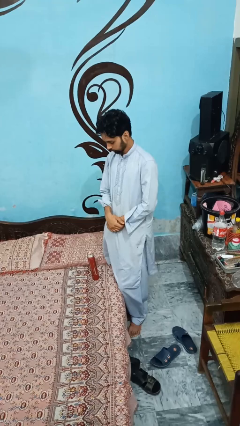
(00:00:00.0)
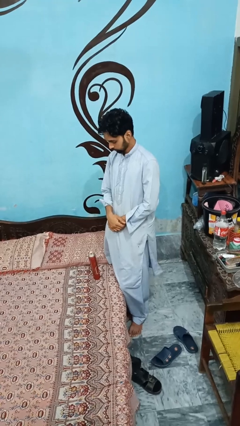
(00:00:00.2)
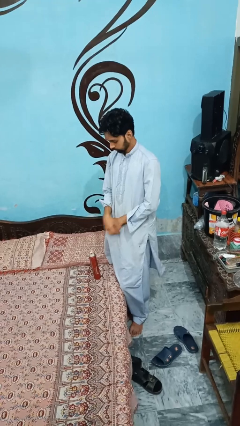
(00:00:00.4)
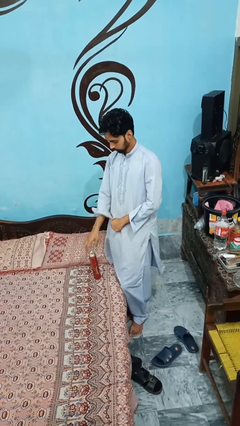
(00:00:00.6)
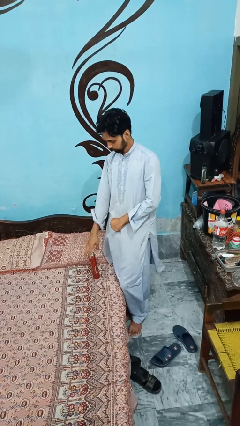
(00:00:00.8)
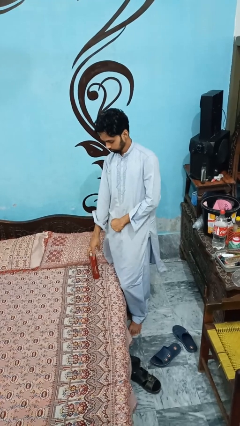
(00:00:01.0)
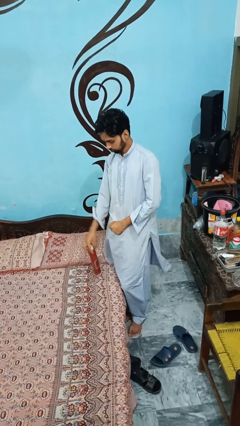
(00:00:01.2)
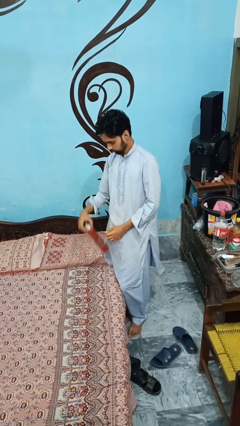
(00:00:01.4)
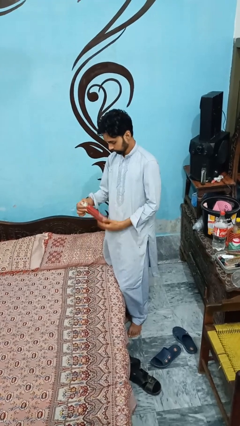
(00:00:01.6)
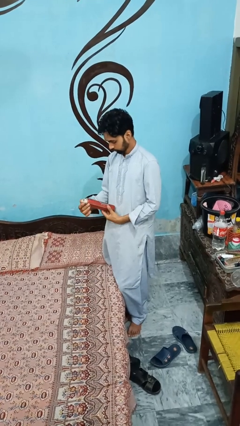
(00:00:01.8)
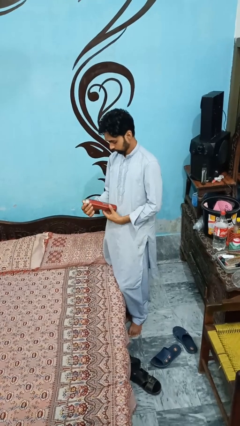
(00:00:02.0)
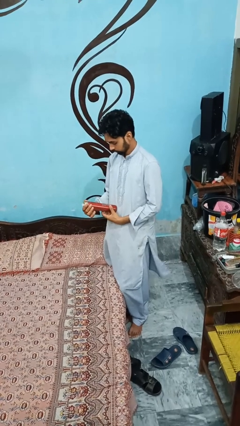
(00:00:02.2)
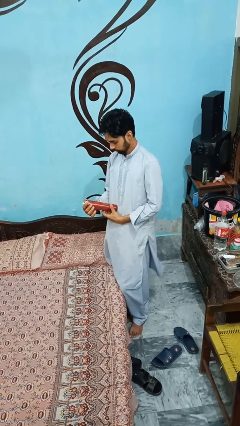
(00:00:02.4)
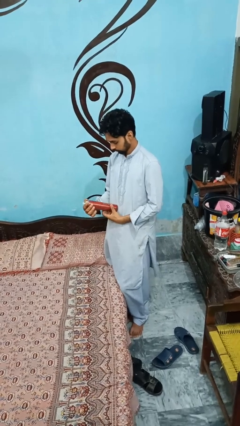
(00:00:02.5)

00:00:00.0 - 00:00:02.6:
person picks up object from bed

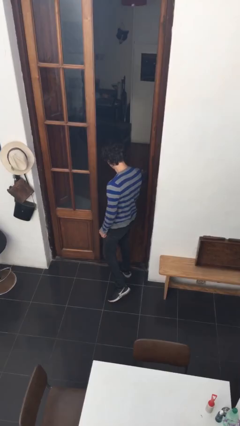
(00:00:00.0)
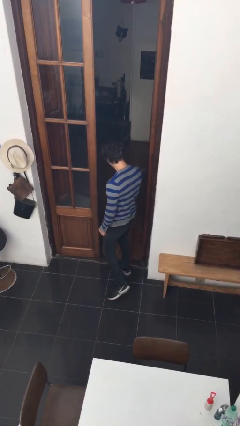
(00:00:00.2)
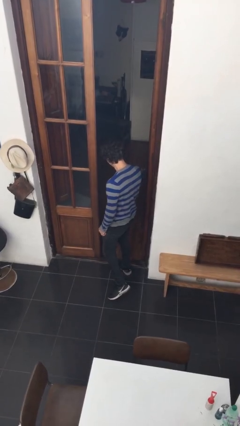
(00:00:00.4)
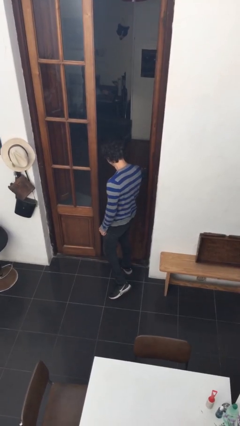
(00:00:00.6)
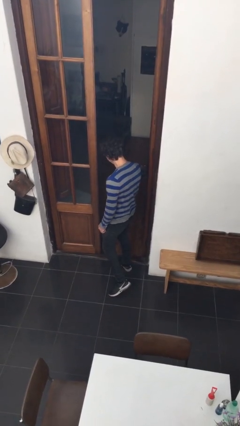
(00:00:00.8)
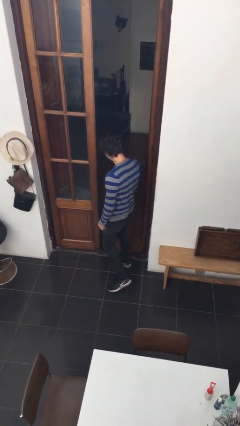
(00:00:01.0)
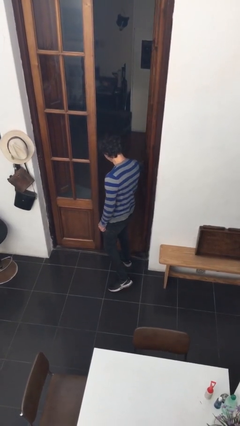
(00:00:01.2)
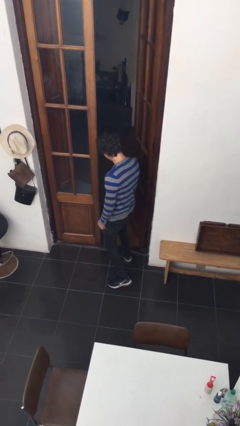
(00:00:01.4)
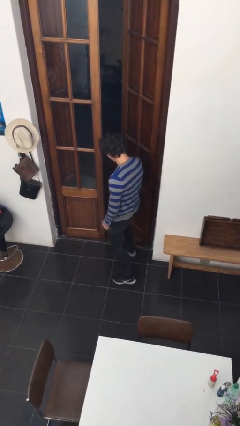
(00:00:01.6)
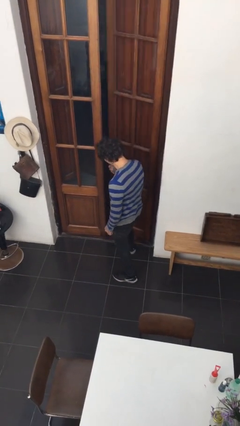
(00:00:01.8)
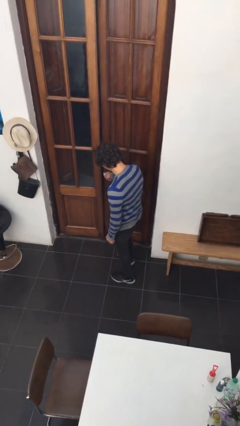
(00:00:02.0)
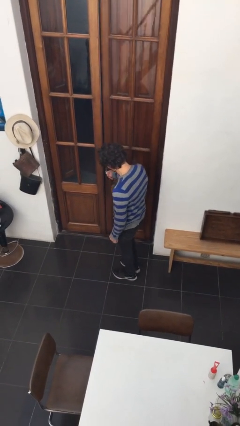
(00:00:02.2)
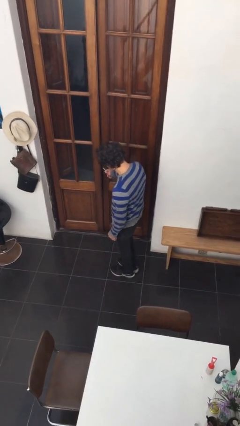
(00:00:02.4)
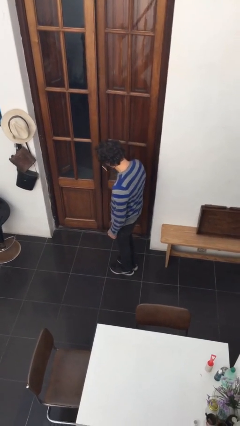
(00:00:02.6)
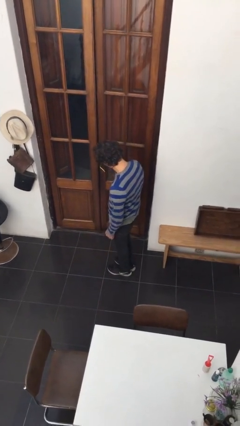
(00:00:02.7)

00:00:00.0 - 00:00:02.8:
person closes facility door

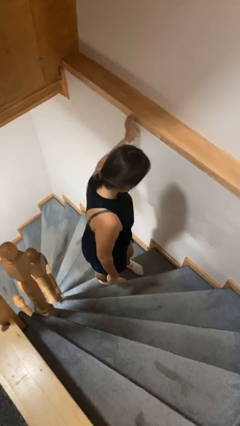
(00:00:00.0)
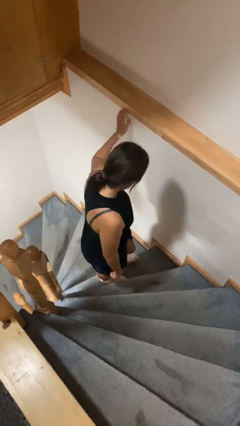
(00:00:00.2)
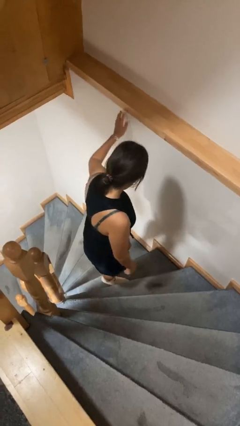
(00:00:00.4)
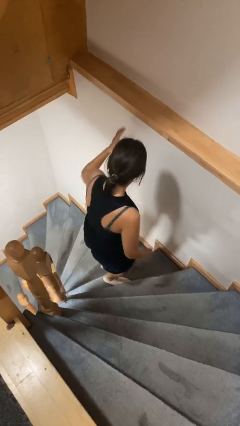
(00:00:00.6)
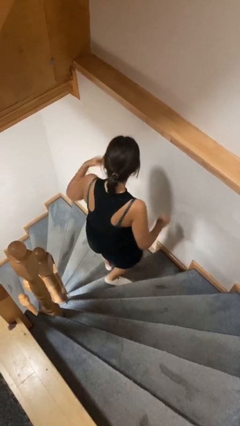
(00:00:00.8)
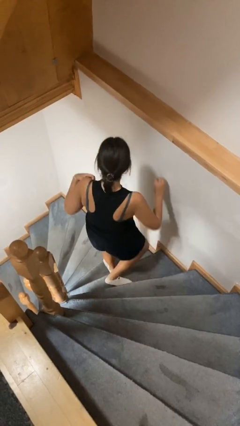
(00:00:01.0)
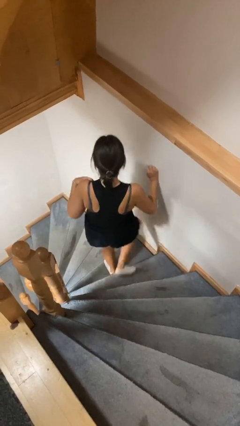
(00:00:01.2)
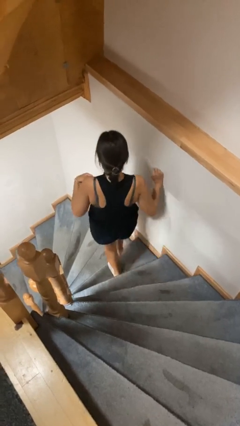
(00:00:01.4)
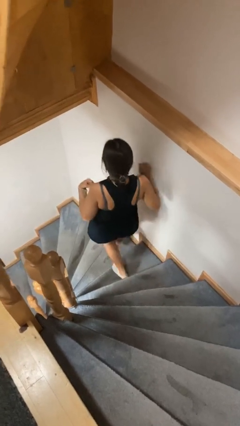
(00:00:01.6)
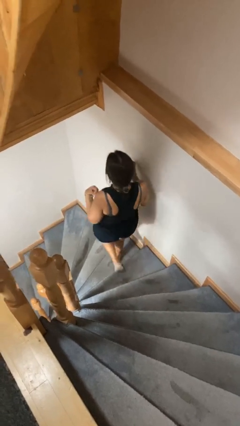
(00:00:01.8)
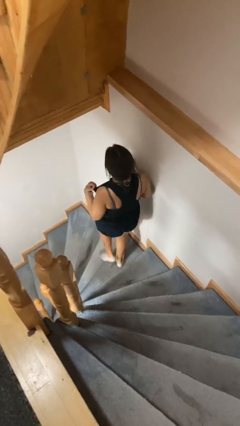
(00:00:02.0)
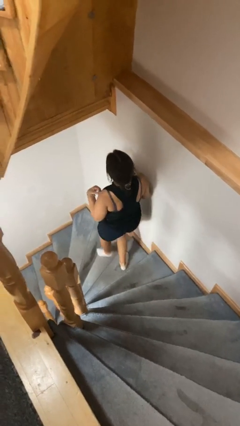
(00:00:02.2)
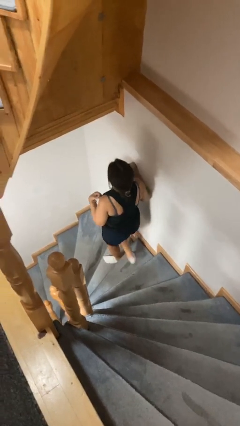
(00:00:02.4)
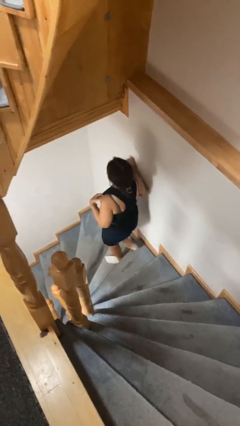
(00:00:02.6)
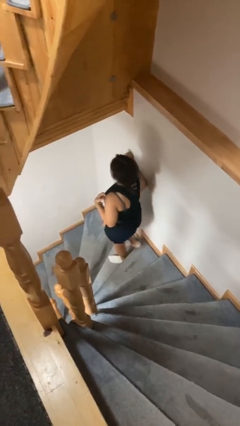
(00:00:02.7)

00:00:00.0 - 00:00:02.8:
person climbs down stairs

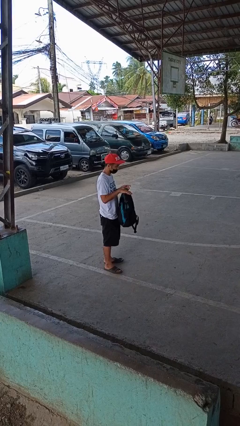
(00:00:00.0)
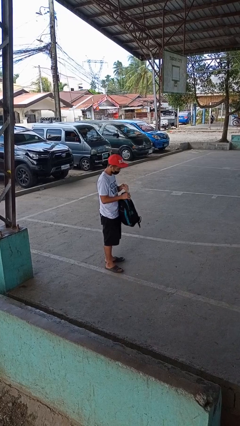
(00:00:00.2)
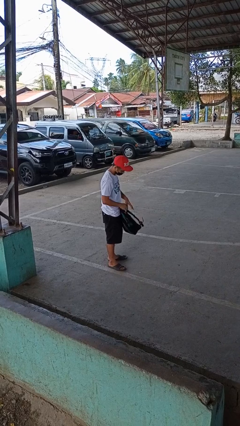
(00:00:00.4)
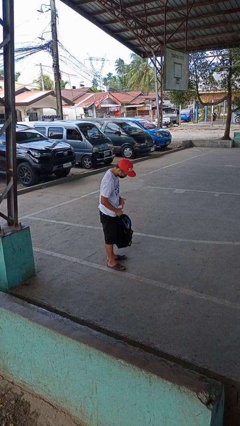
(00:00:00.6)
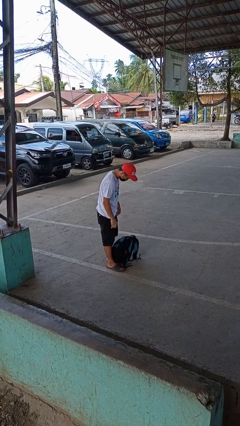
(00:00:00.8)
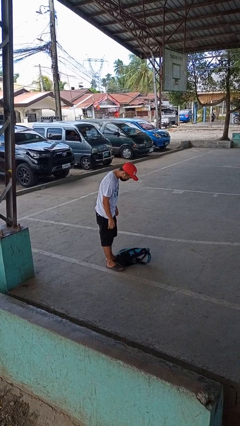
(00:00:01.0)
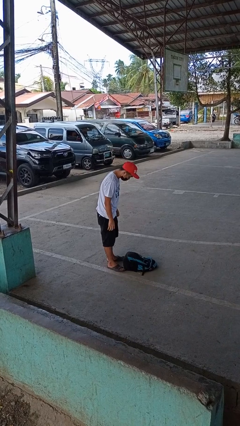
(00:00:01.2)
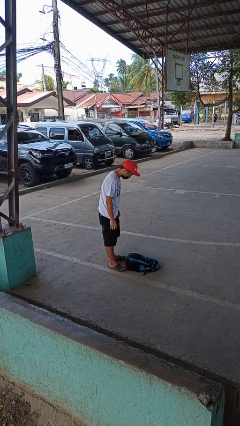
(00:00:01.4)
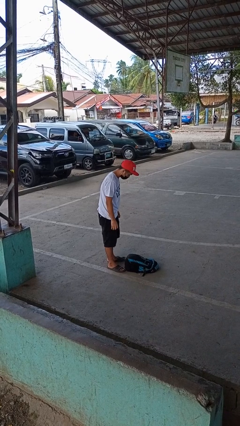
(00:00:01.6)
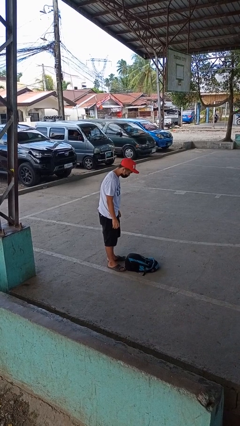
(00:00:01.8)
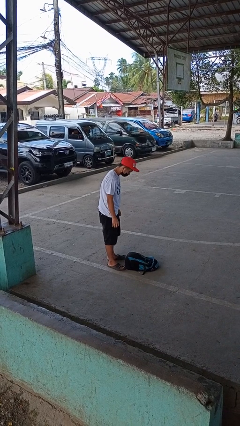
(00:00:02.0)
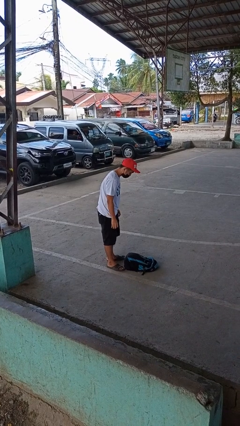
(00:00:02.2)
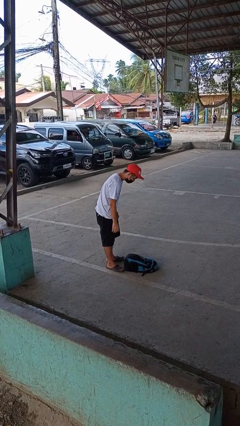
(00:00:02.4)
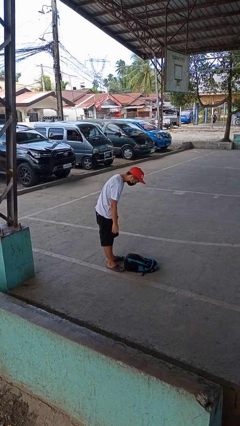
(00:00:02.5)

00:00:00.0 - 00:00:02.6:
person drops object

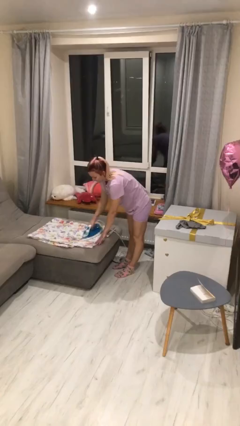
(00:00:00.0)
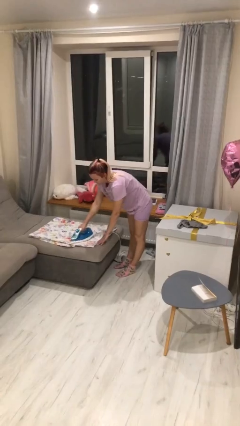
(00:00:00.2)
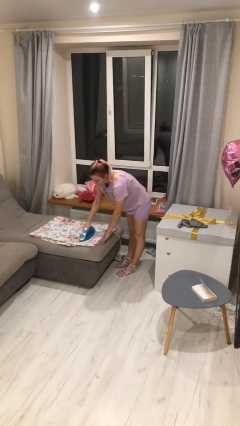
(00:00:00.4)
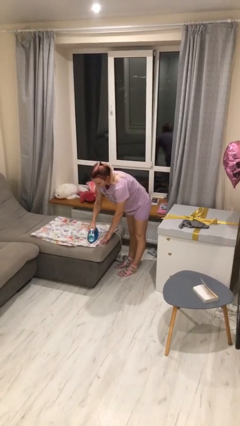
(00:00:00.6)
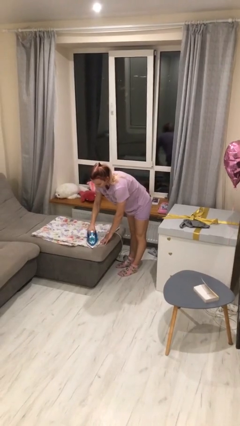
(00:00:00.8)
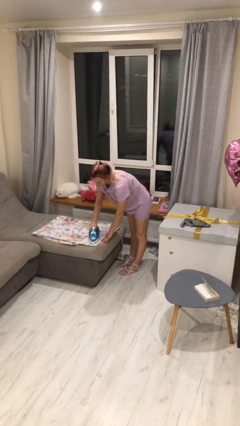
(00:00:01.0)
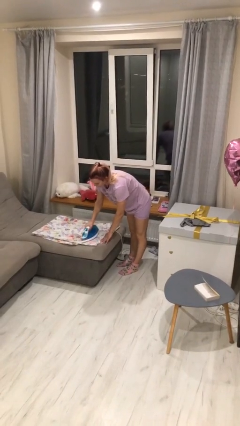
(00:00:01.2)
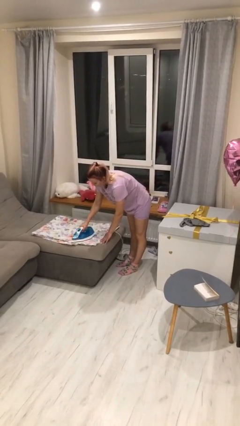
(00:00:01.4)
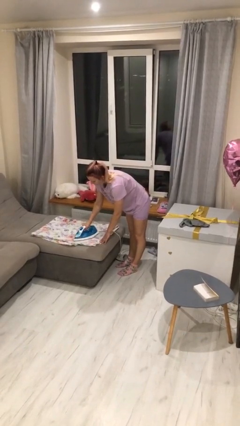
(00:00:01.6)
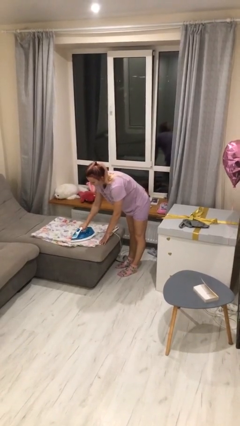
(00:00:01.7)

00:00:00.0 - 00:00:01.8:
person irons clothes

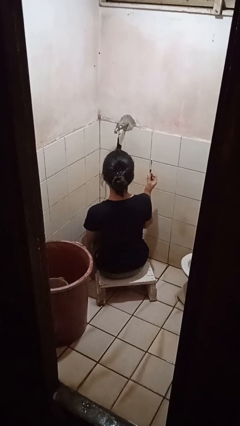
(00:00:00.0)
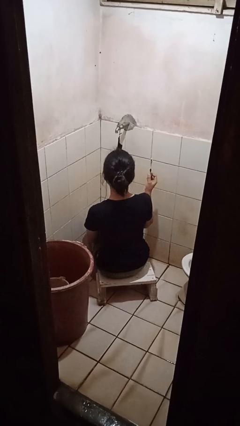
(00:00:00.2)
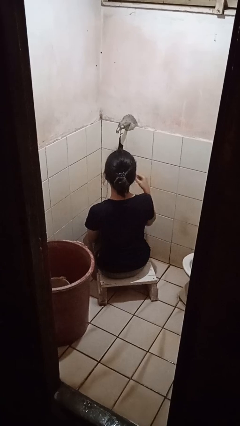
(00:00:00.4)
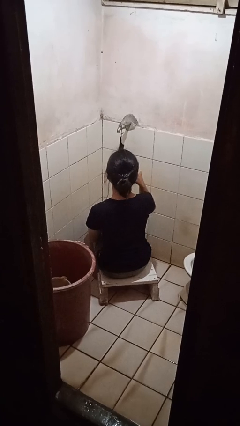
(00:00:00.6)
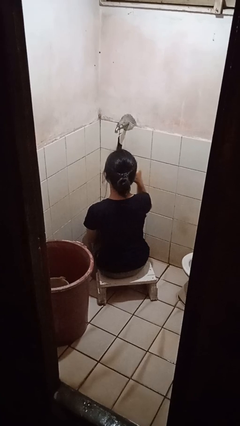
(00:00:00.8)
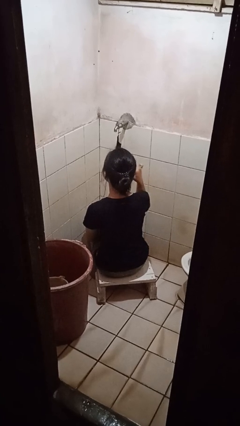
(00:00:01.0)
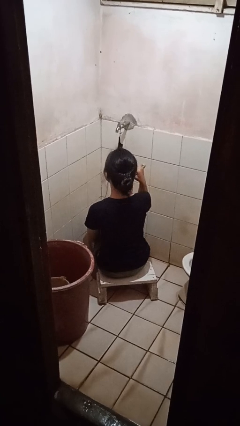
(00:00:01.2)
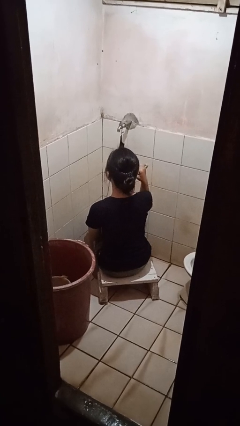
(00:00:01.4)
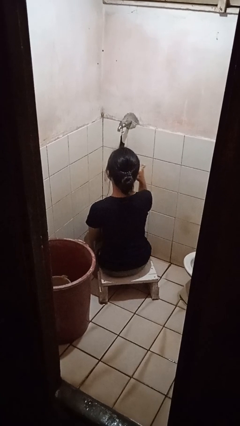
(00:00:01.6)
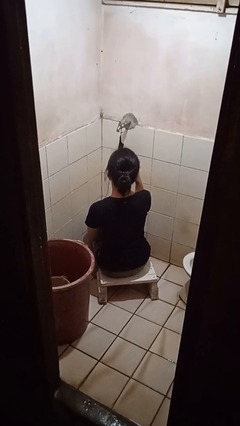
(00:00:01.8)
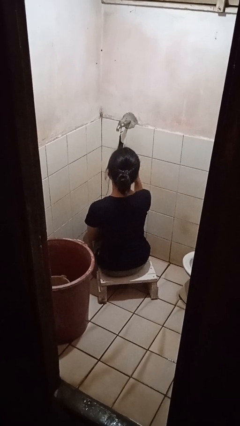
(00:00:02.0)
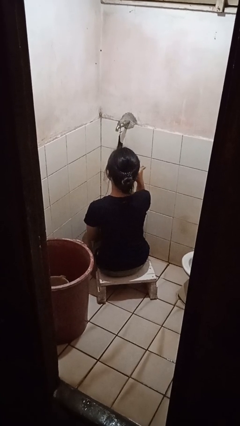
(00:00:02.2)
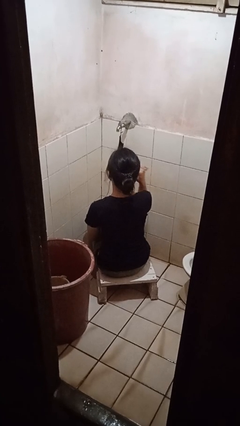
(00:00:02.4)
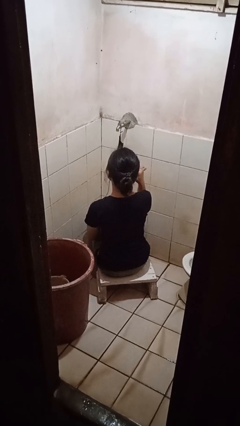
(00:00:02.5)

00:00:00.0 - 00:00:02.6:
person brushes teeth

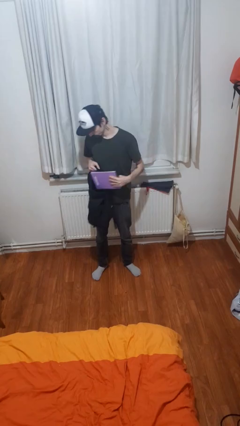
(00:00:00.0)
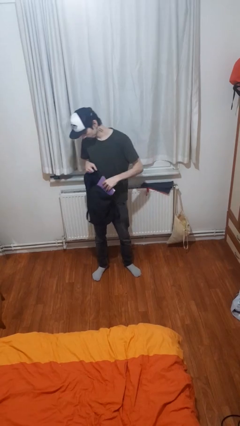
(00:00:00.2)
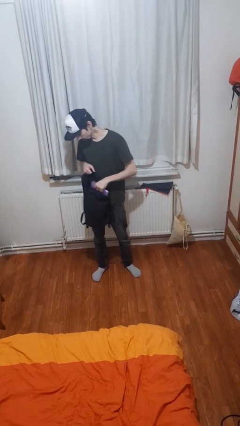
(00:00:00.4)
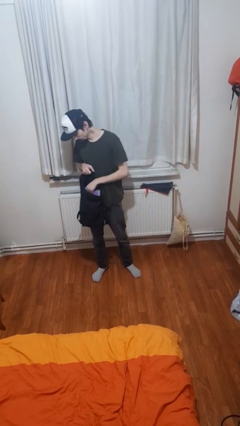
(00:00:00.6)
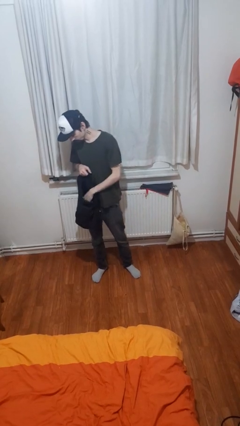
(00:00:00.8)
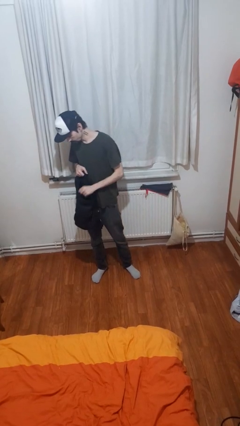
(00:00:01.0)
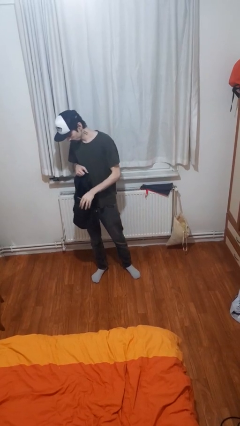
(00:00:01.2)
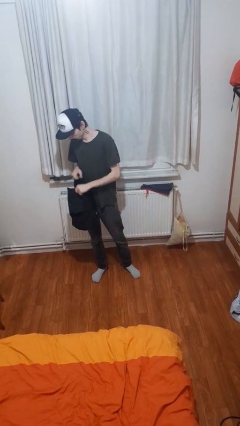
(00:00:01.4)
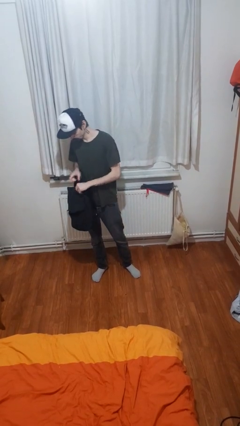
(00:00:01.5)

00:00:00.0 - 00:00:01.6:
person puts object into backpack
